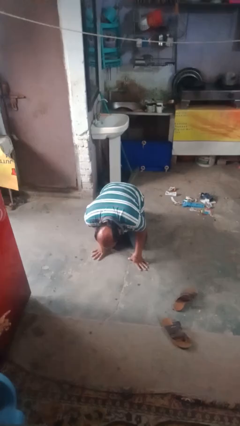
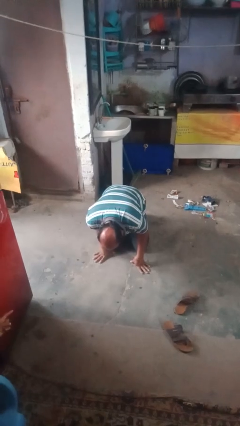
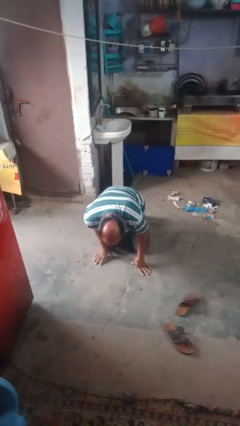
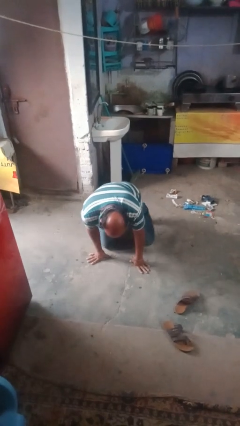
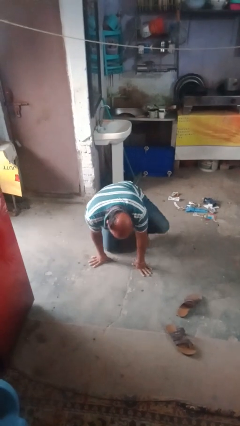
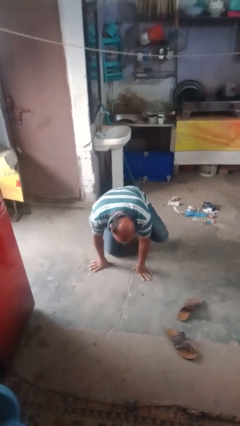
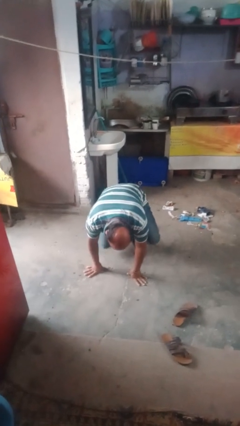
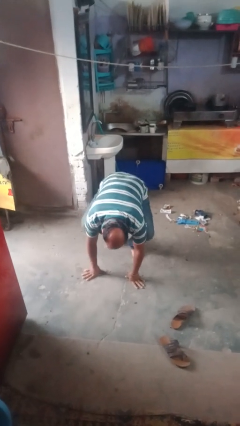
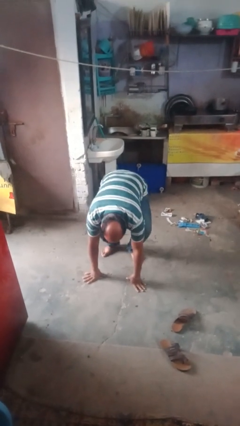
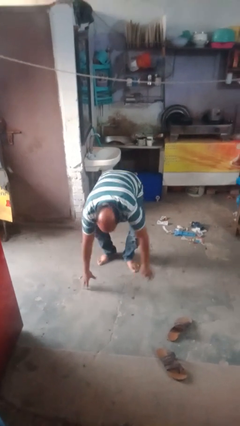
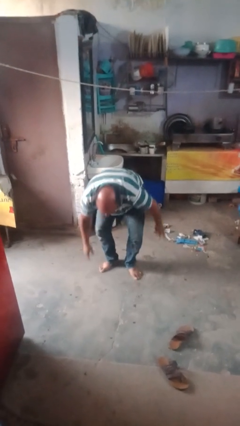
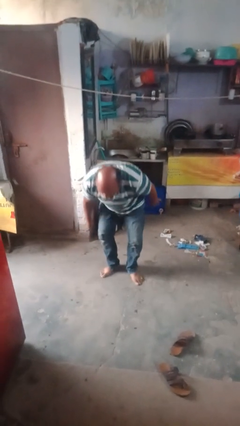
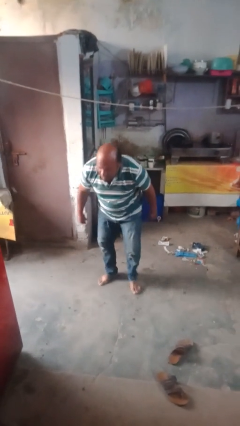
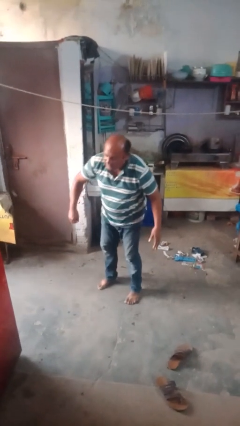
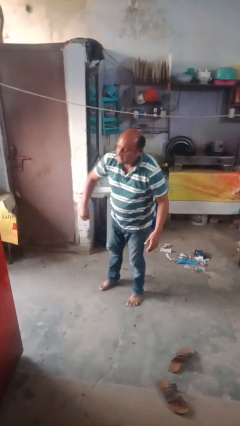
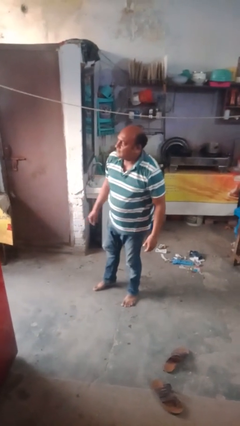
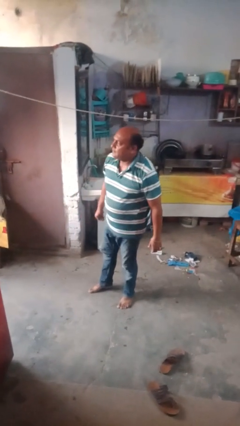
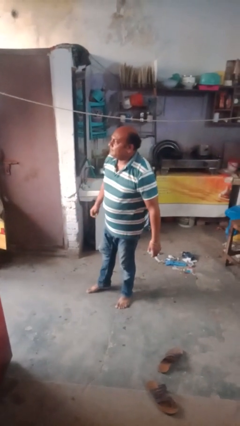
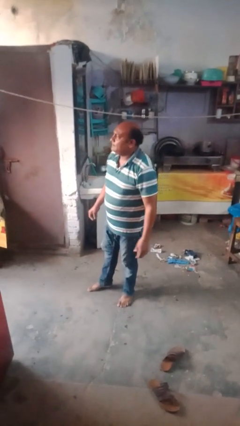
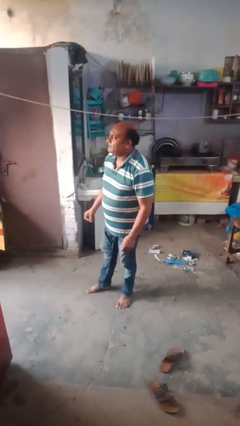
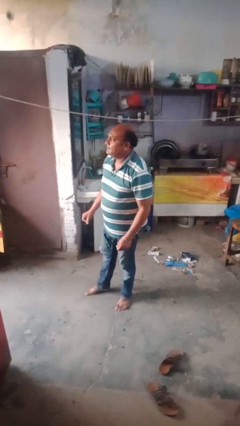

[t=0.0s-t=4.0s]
person stands up from floor

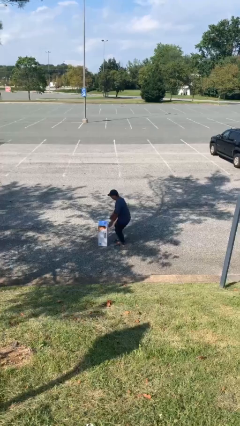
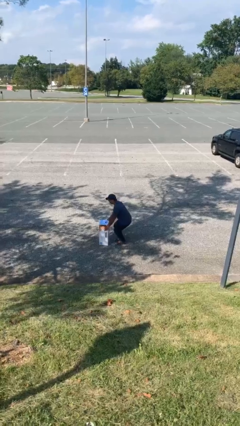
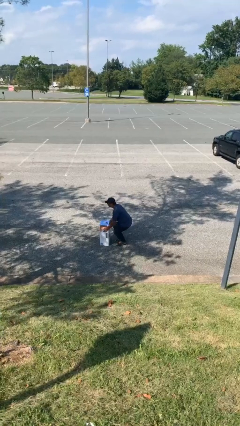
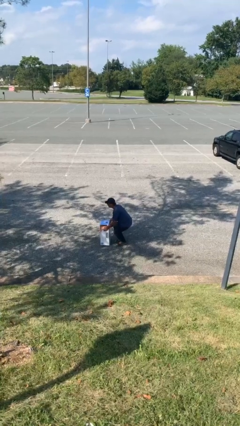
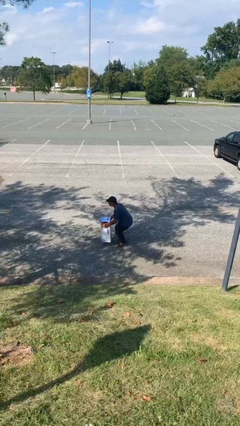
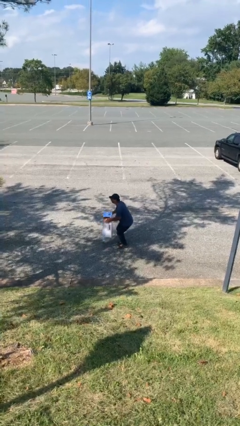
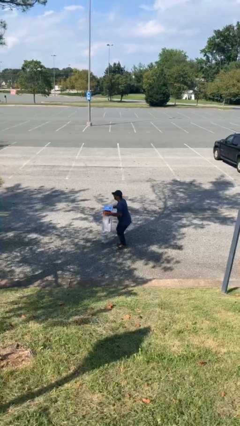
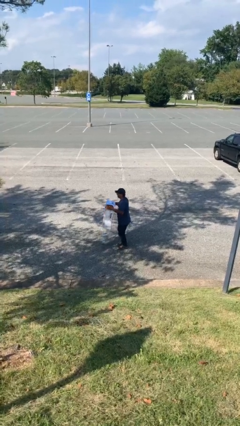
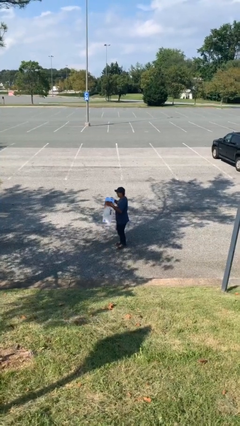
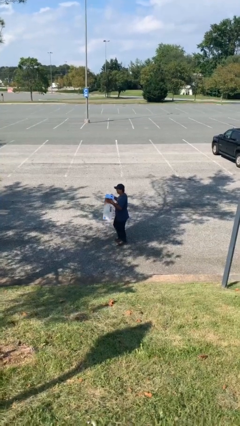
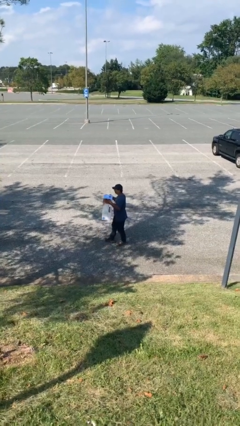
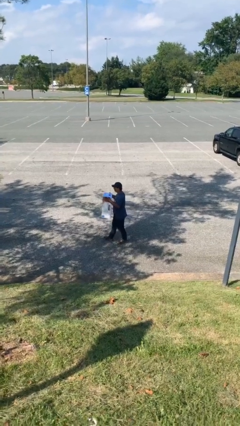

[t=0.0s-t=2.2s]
person picks up object from floor

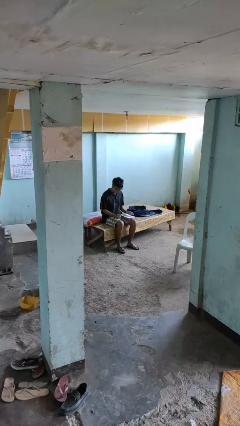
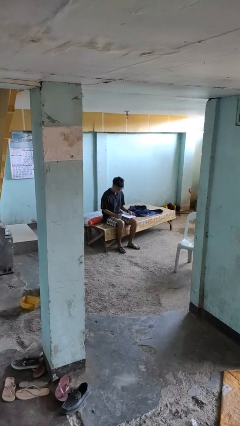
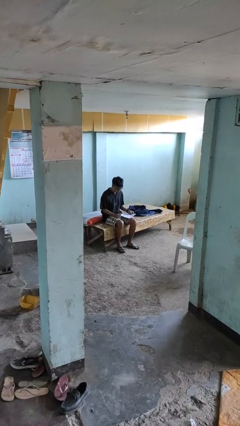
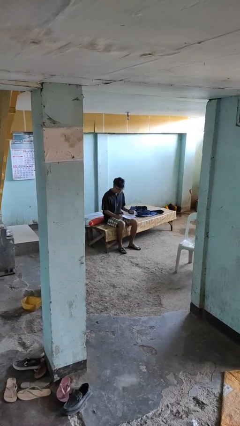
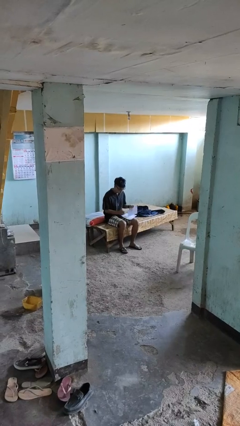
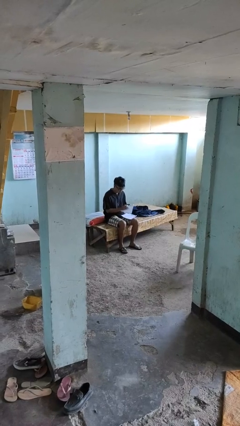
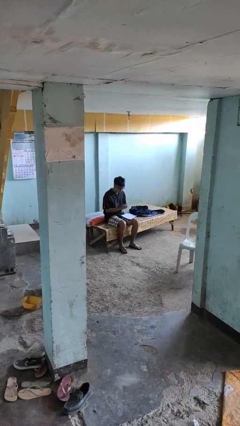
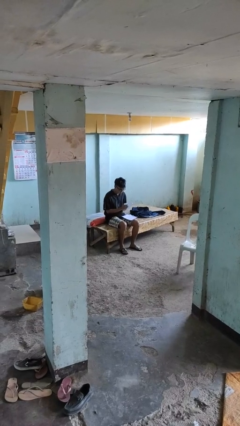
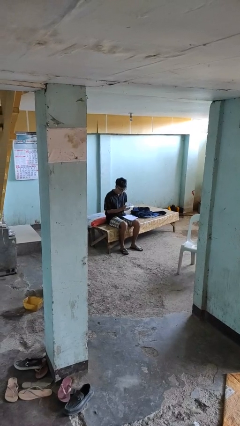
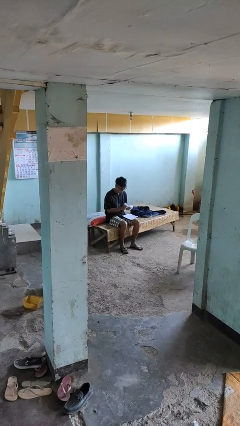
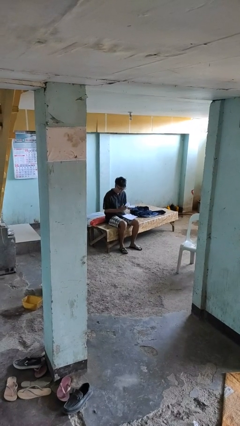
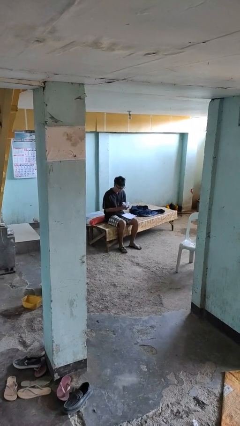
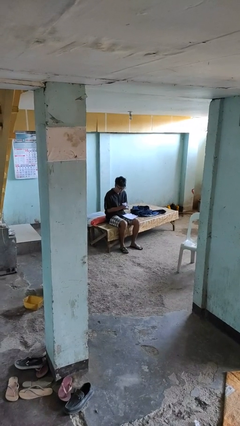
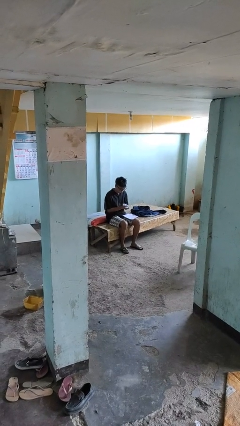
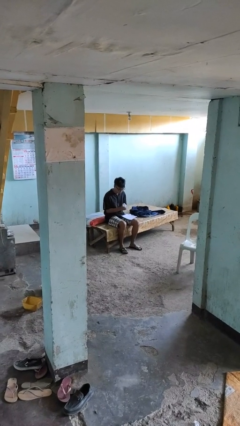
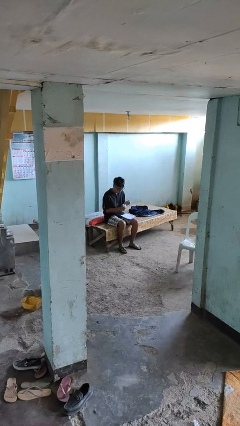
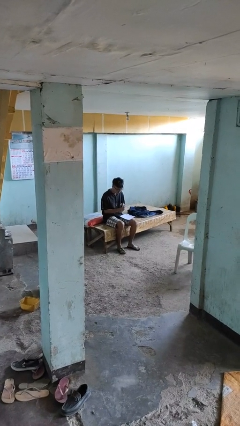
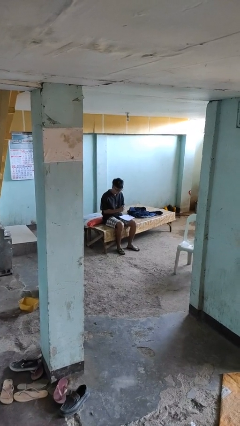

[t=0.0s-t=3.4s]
person crumples paper

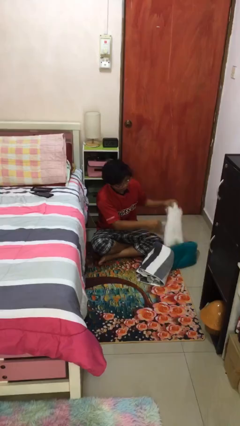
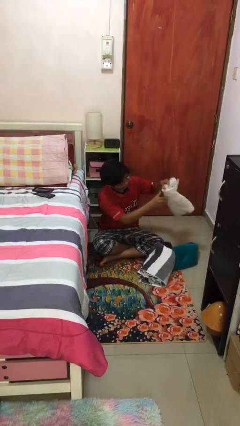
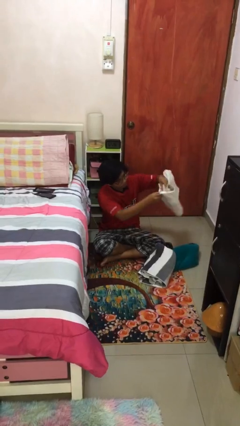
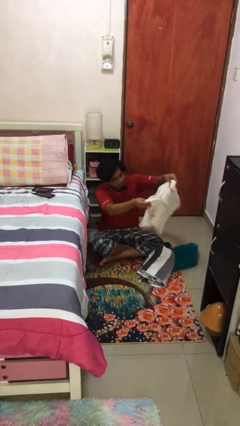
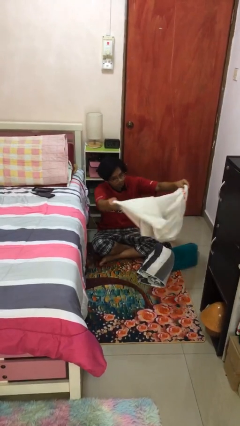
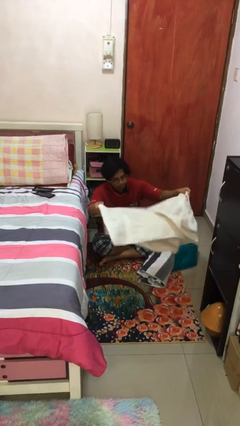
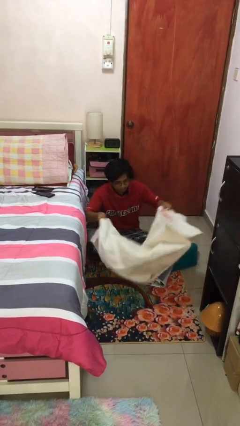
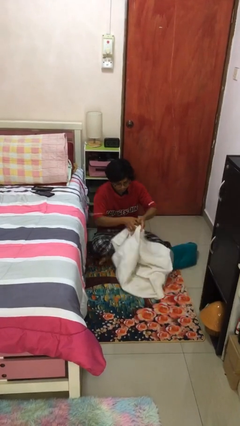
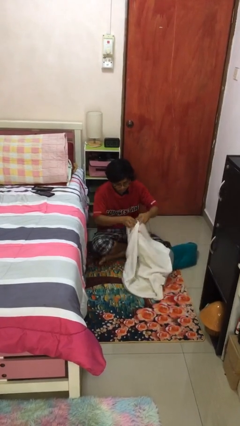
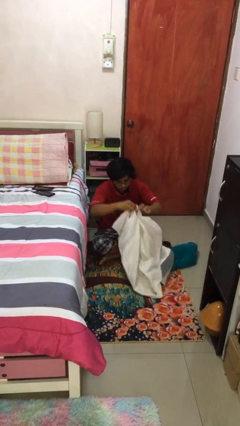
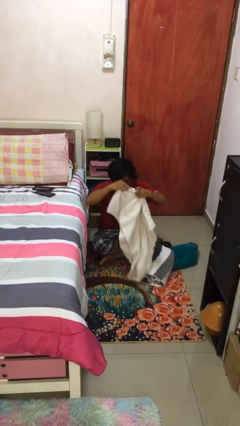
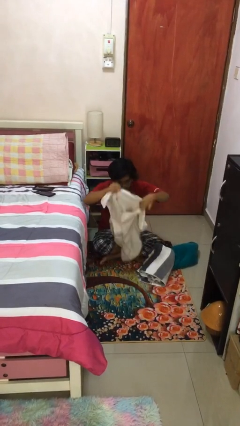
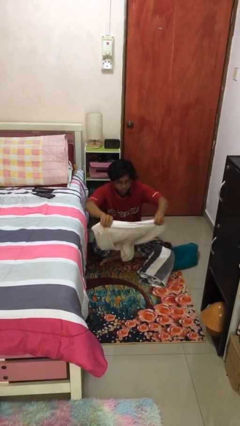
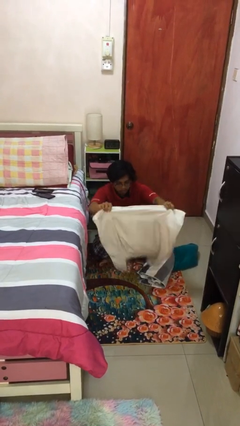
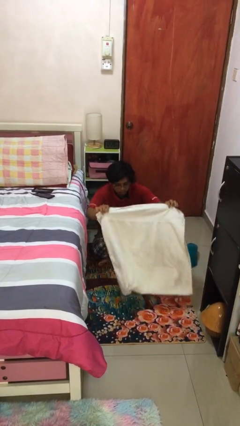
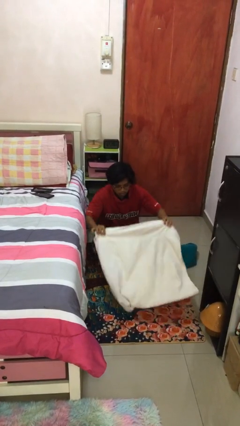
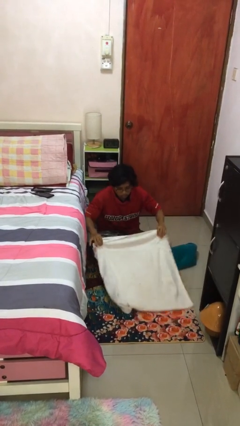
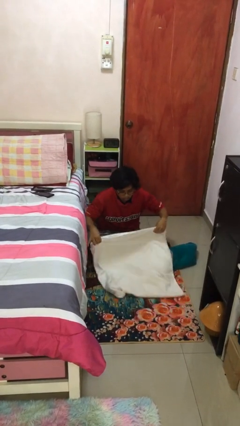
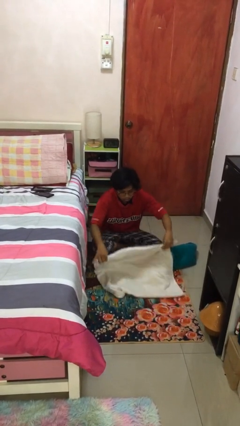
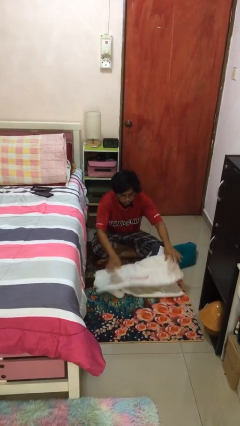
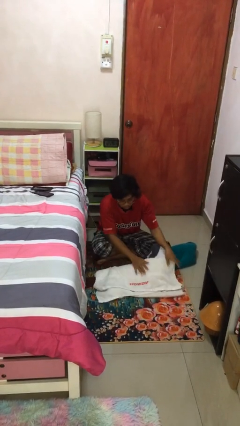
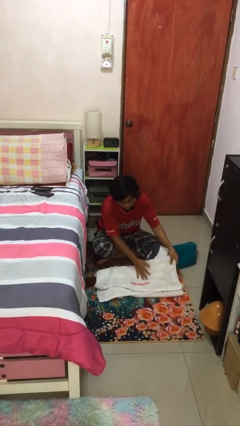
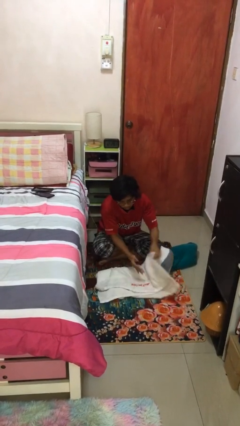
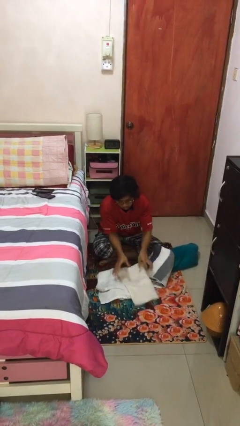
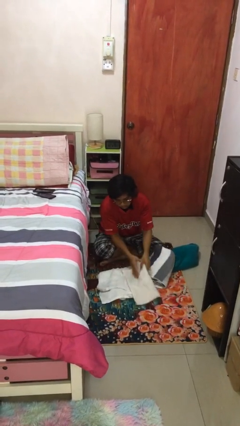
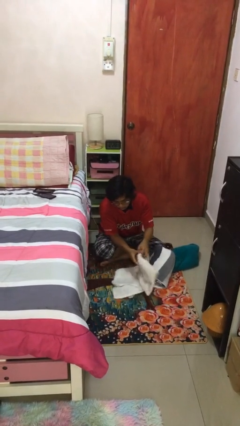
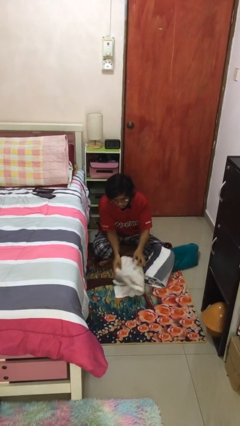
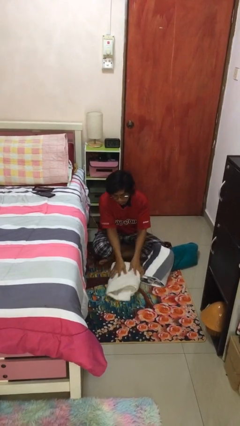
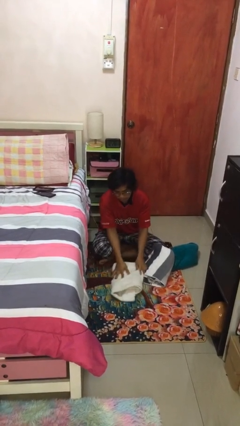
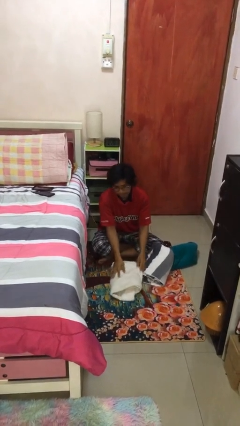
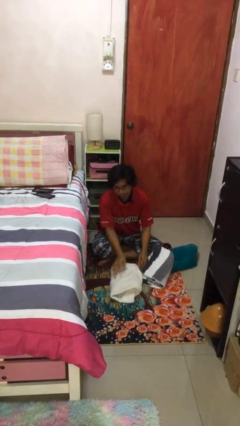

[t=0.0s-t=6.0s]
person folds towel

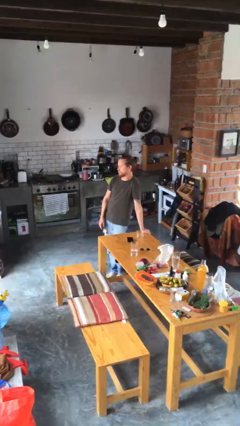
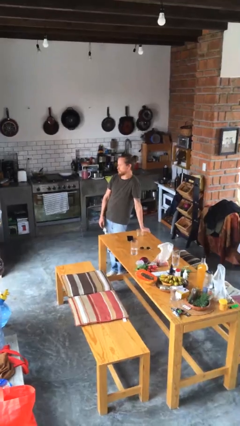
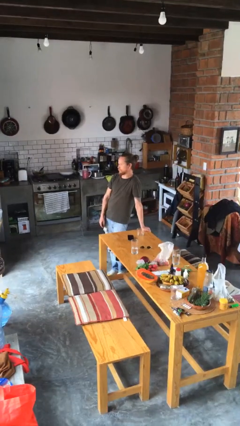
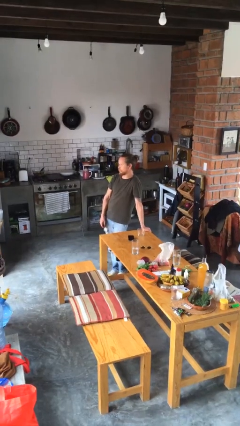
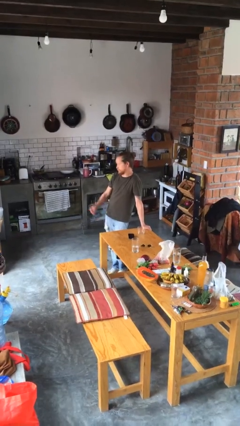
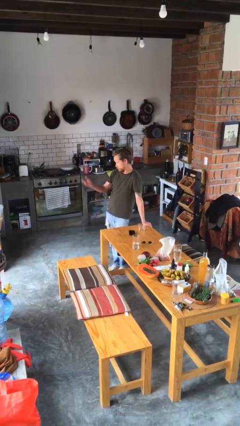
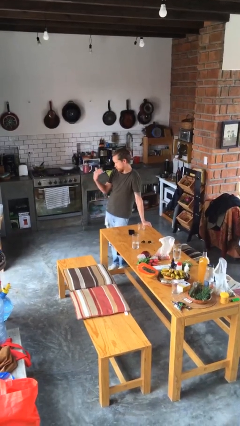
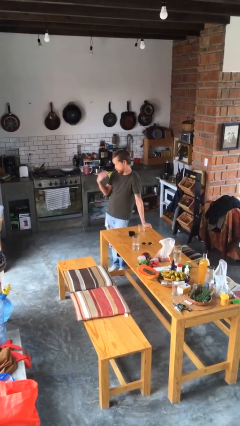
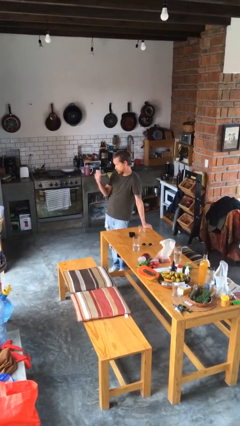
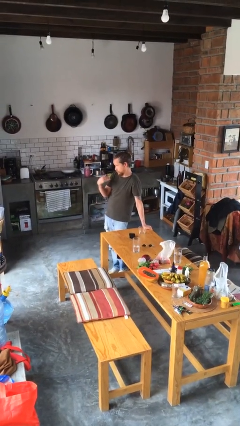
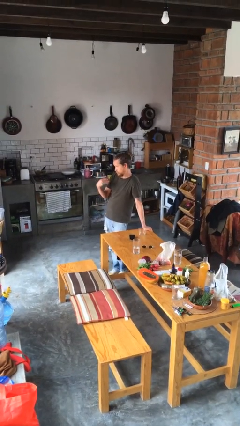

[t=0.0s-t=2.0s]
person gestures come here
